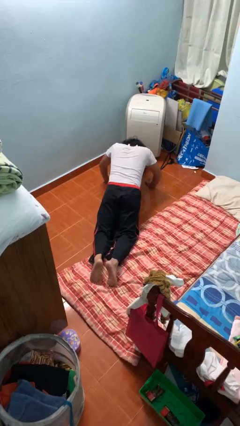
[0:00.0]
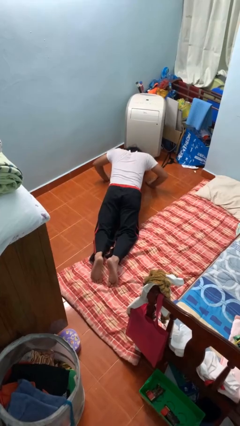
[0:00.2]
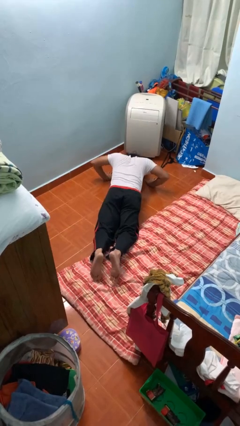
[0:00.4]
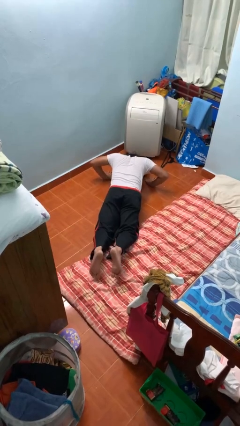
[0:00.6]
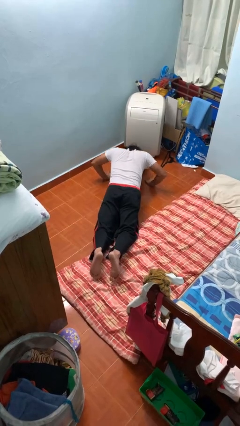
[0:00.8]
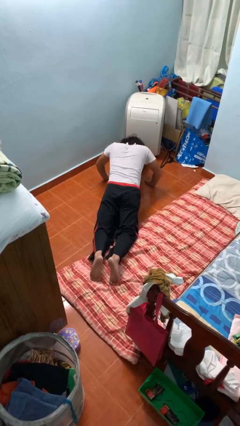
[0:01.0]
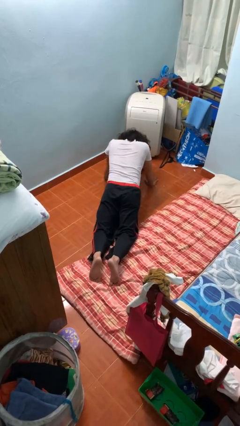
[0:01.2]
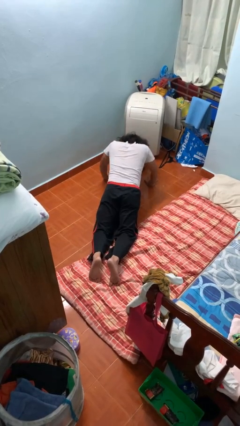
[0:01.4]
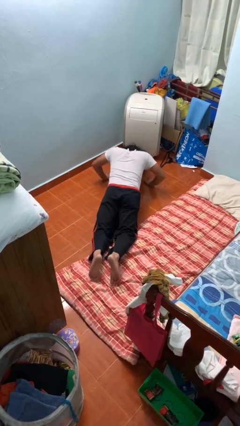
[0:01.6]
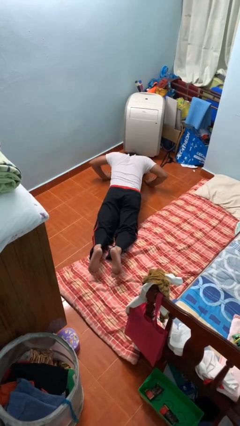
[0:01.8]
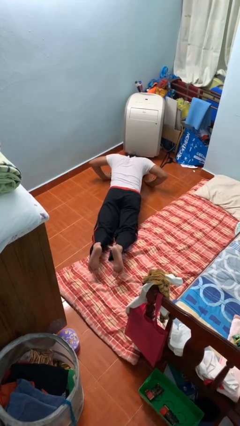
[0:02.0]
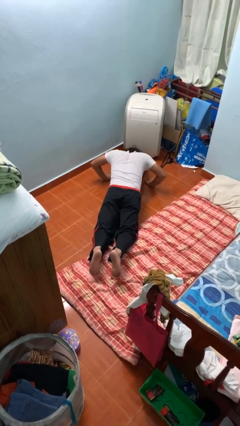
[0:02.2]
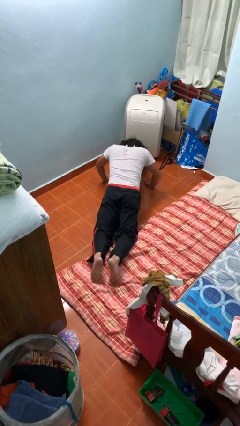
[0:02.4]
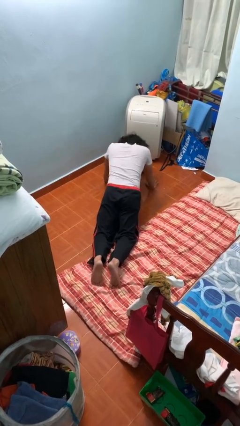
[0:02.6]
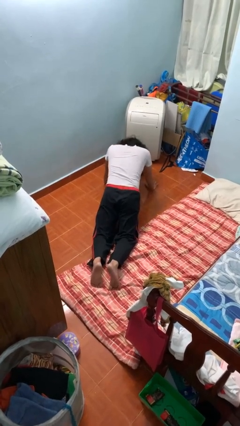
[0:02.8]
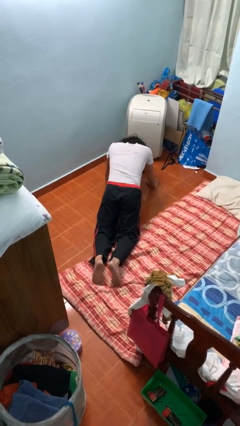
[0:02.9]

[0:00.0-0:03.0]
person exercises with pushup

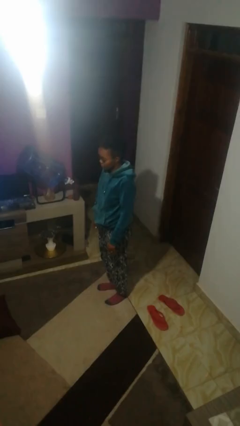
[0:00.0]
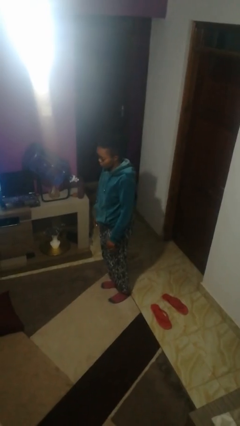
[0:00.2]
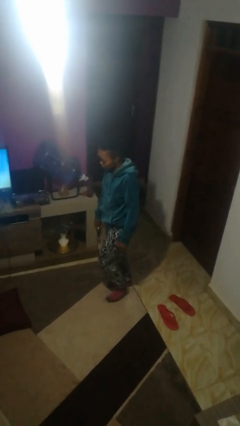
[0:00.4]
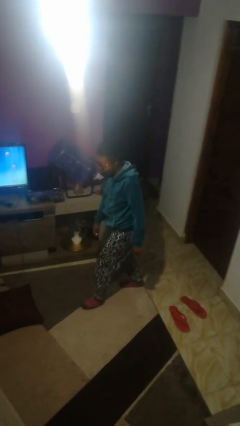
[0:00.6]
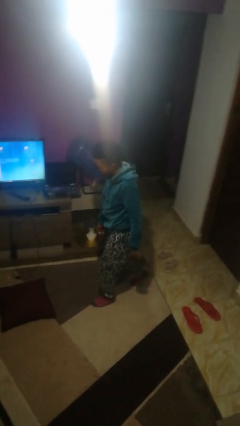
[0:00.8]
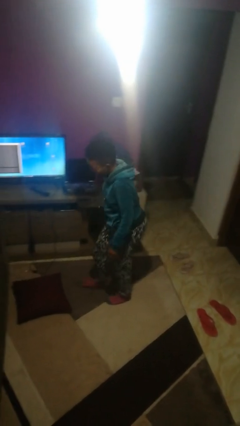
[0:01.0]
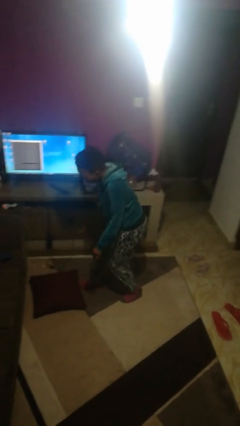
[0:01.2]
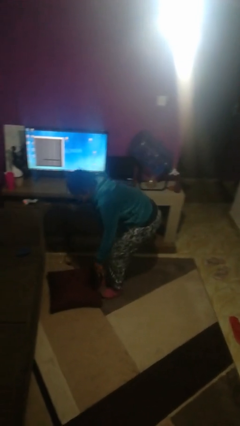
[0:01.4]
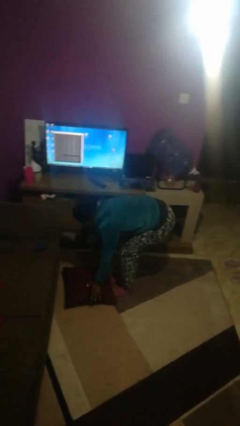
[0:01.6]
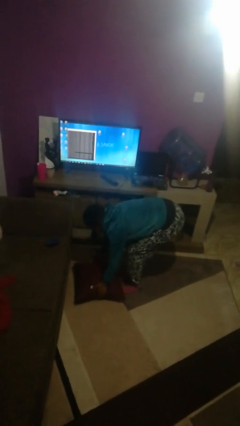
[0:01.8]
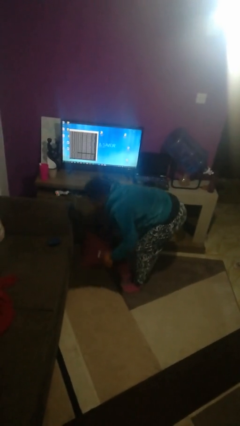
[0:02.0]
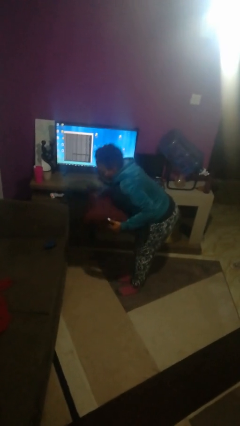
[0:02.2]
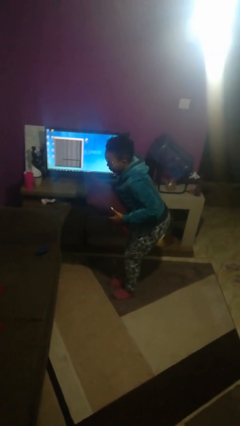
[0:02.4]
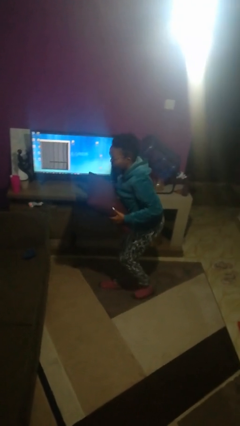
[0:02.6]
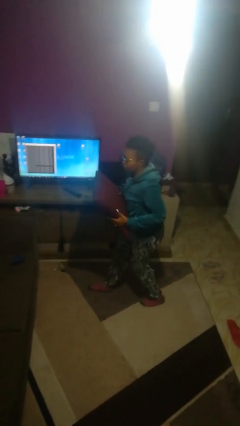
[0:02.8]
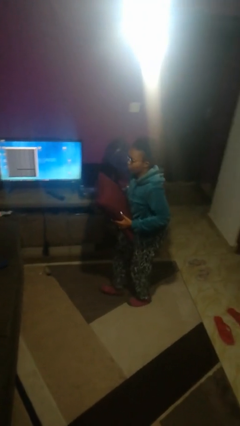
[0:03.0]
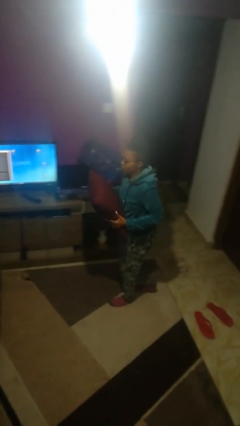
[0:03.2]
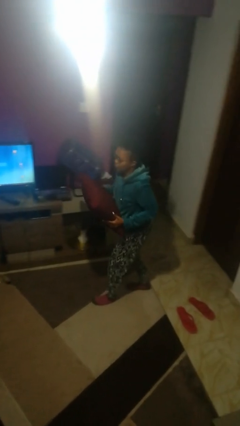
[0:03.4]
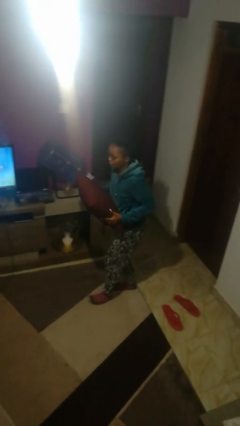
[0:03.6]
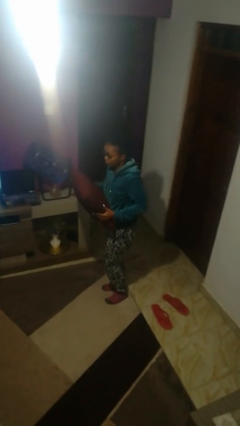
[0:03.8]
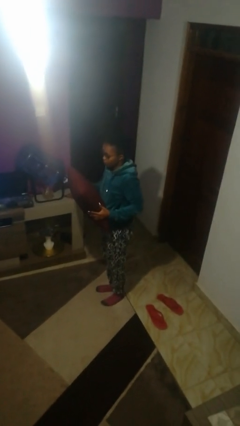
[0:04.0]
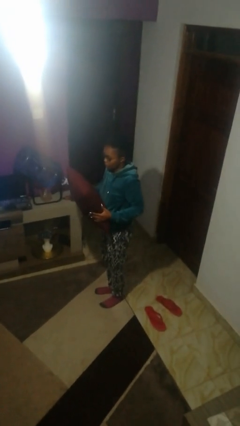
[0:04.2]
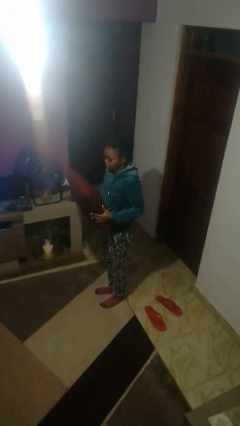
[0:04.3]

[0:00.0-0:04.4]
person picks up object from floor

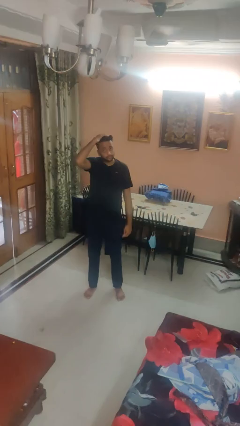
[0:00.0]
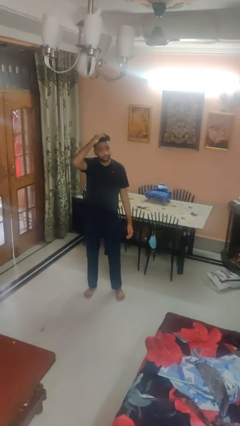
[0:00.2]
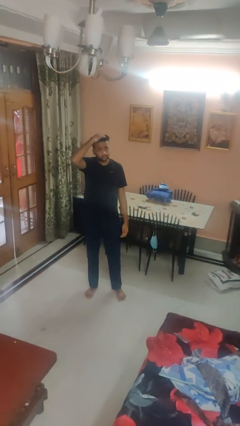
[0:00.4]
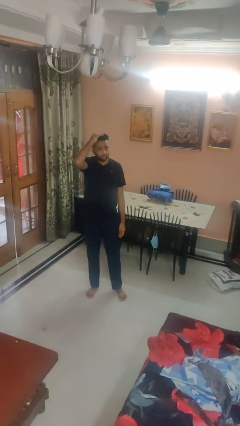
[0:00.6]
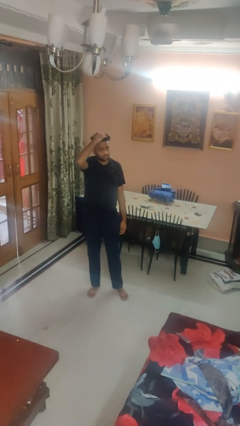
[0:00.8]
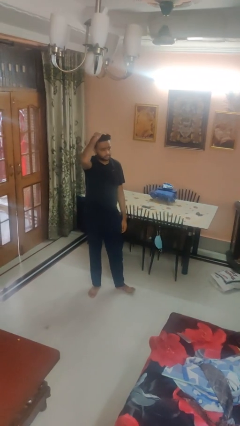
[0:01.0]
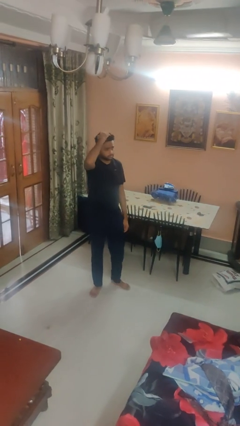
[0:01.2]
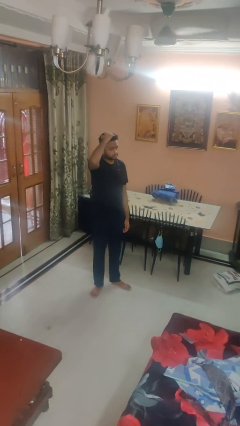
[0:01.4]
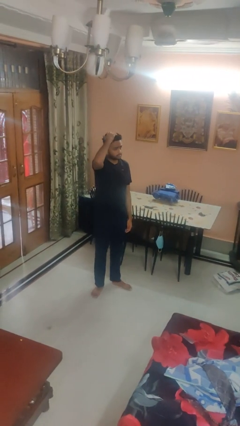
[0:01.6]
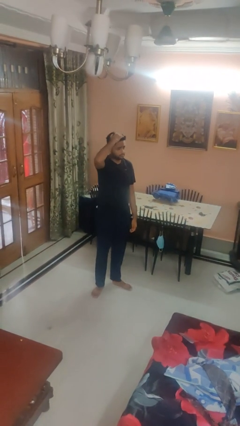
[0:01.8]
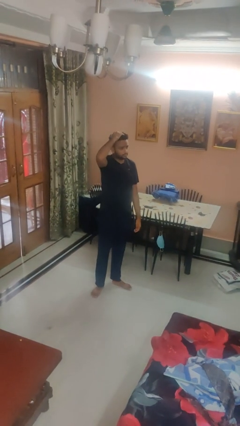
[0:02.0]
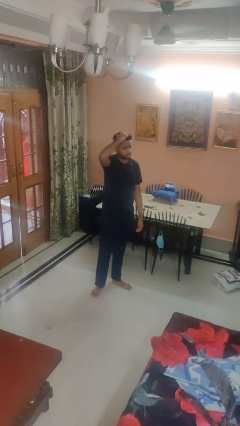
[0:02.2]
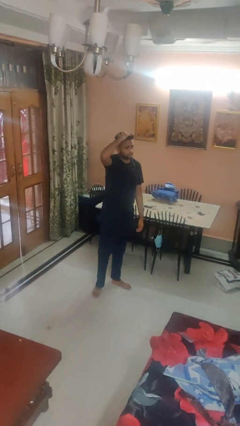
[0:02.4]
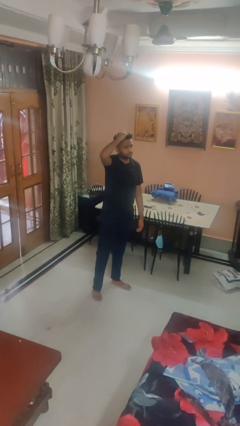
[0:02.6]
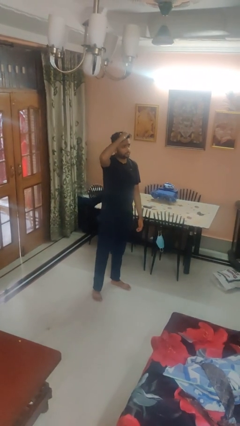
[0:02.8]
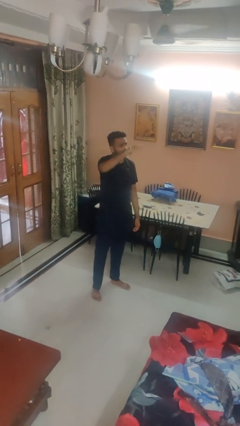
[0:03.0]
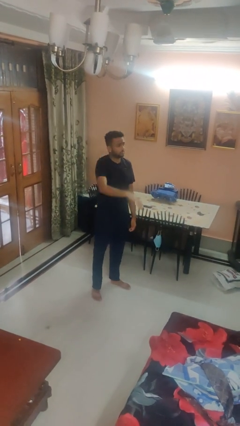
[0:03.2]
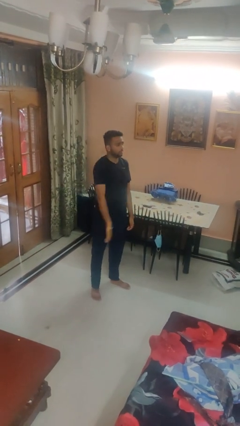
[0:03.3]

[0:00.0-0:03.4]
person pats head

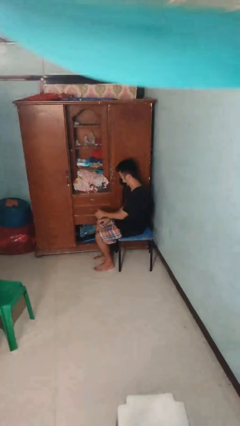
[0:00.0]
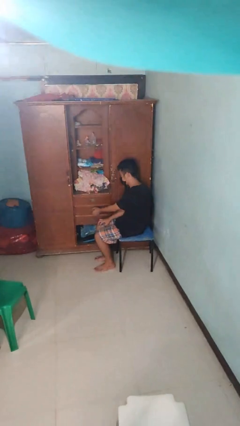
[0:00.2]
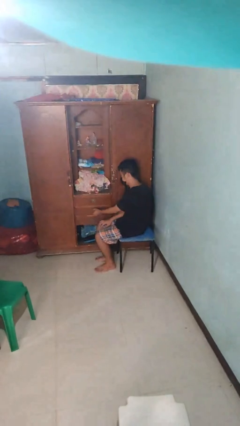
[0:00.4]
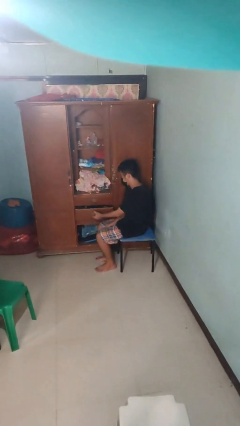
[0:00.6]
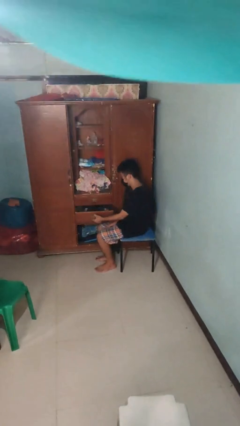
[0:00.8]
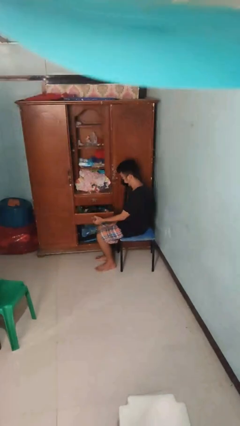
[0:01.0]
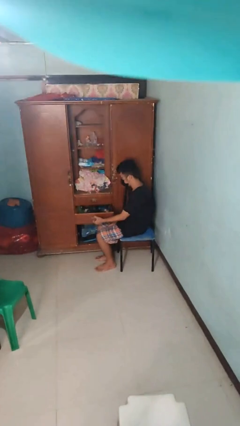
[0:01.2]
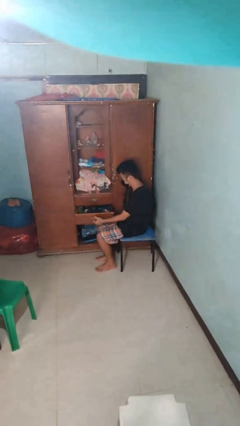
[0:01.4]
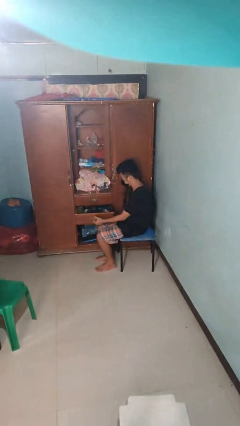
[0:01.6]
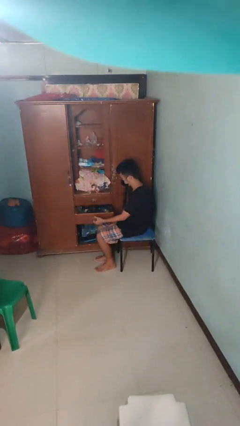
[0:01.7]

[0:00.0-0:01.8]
person opens dresser drawer

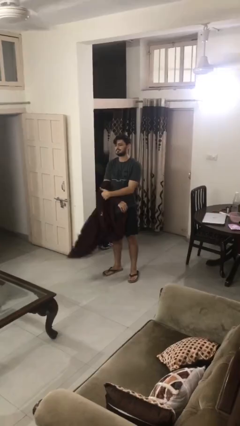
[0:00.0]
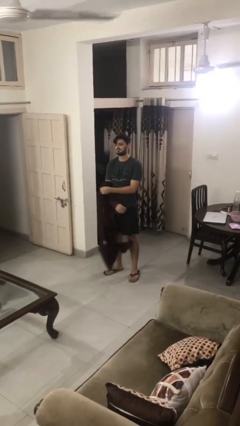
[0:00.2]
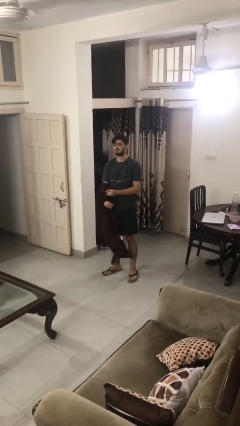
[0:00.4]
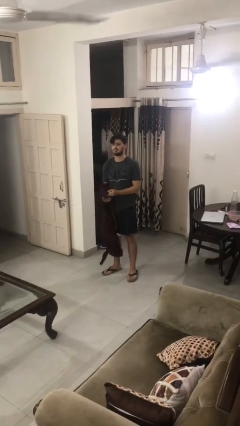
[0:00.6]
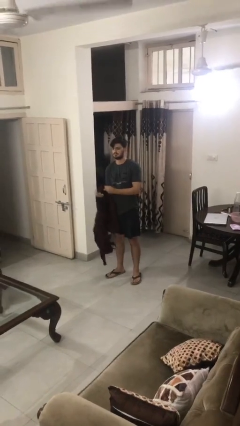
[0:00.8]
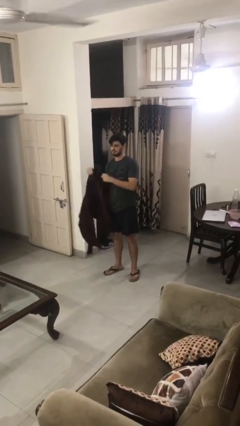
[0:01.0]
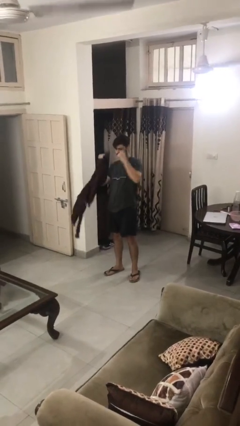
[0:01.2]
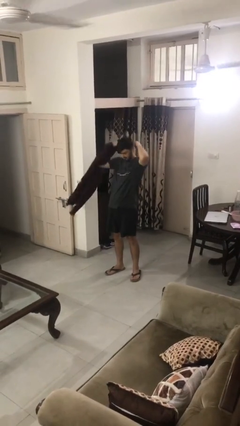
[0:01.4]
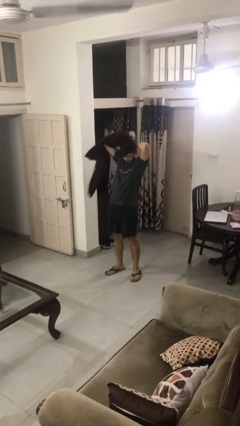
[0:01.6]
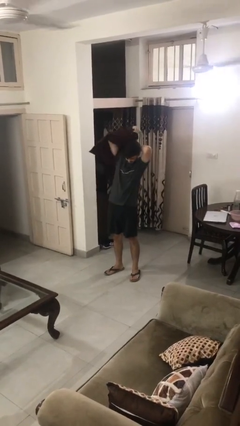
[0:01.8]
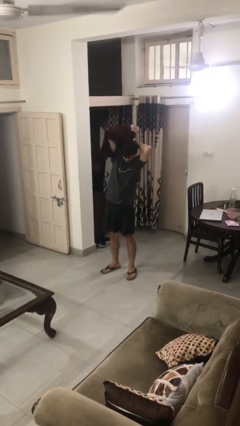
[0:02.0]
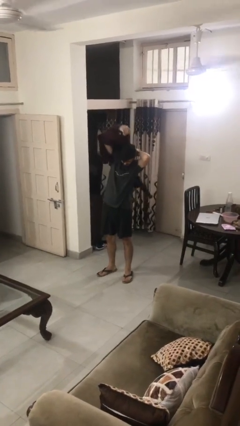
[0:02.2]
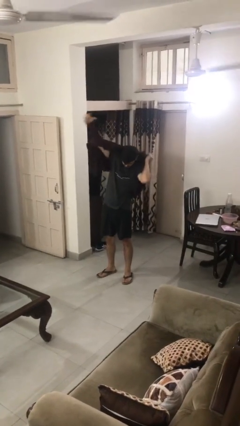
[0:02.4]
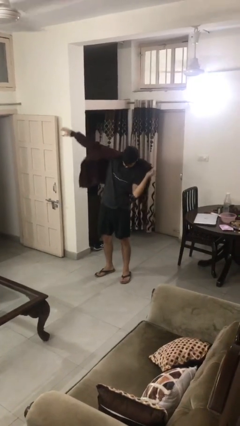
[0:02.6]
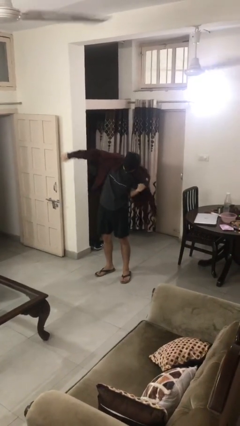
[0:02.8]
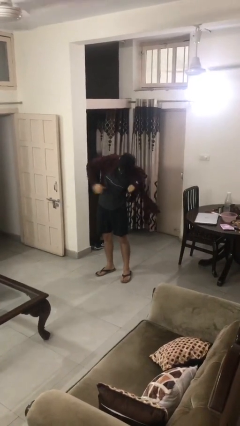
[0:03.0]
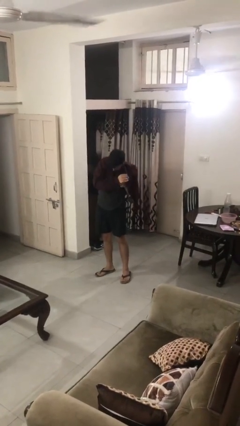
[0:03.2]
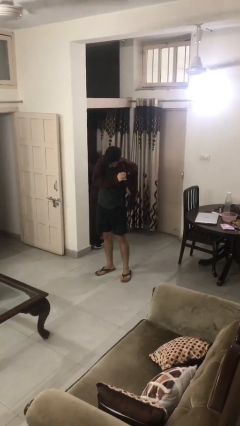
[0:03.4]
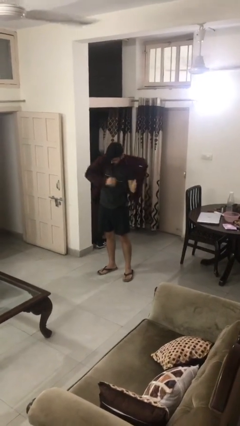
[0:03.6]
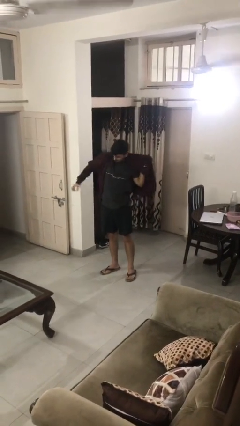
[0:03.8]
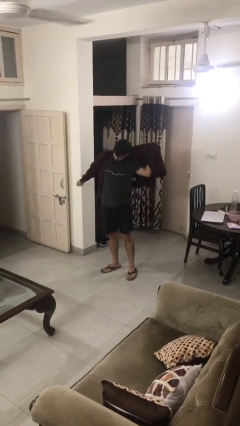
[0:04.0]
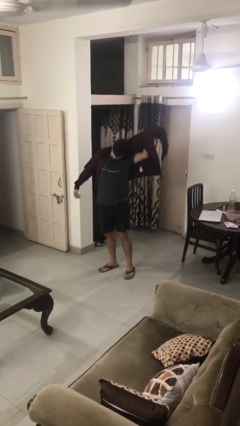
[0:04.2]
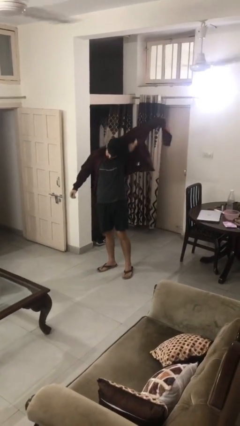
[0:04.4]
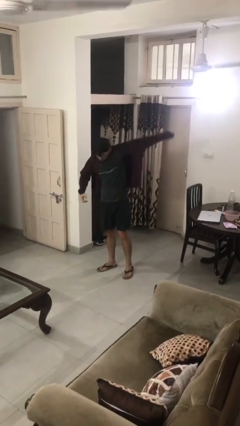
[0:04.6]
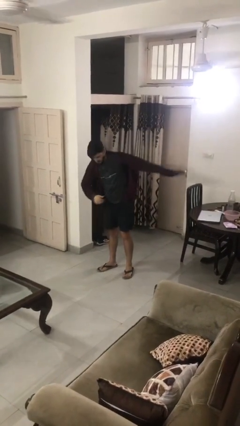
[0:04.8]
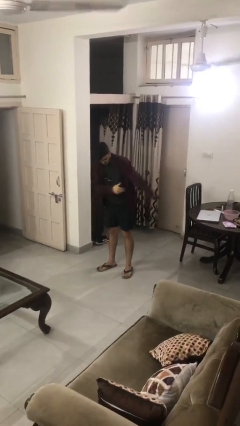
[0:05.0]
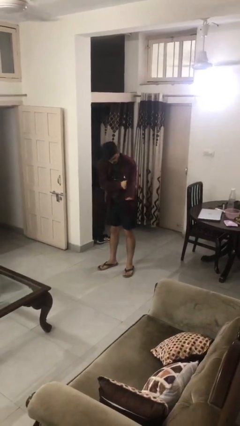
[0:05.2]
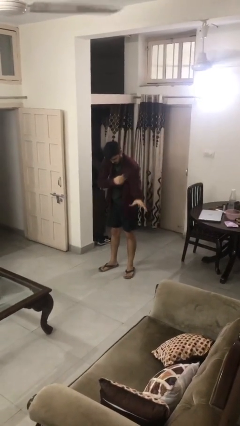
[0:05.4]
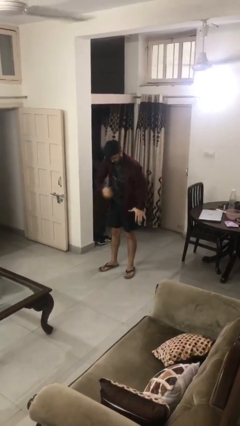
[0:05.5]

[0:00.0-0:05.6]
person puts on jacket
